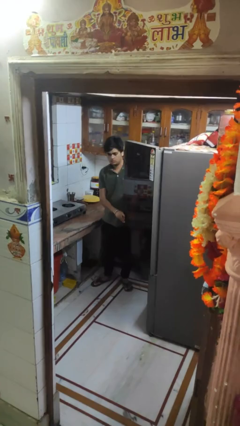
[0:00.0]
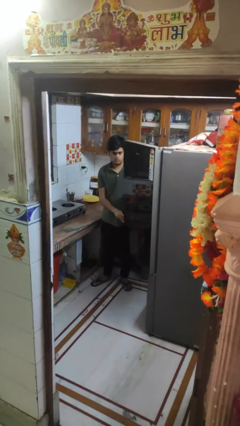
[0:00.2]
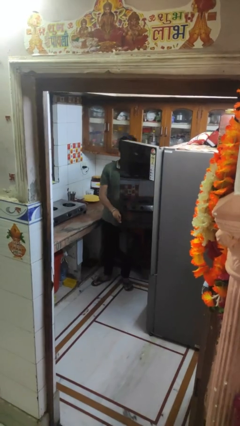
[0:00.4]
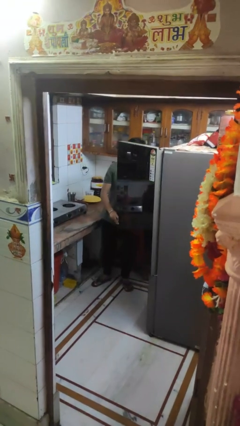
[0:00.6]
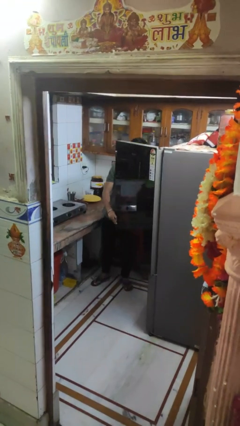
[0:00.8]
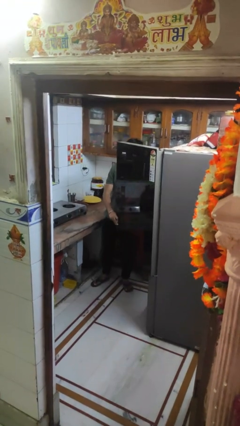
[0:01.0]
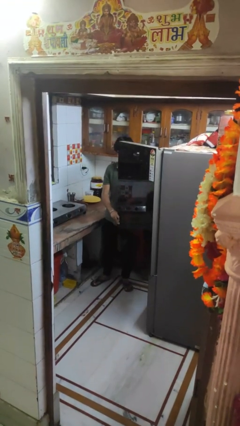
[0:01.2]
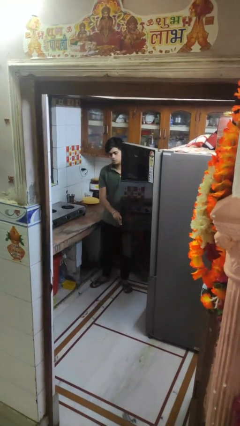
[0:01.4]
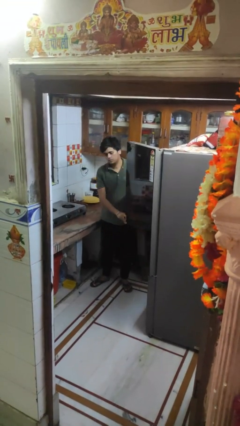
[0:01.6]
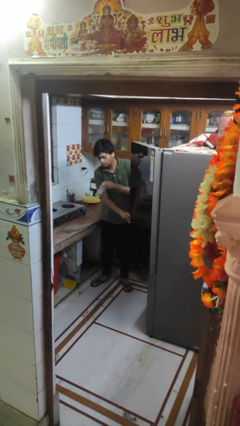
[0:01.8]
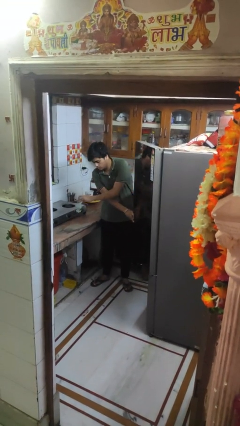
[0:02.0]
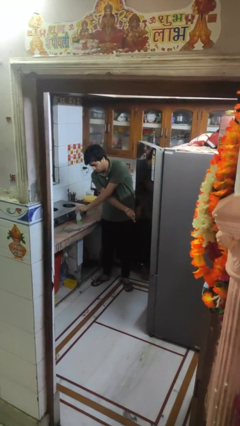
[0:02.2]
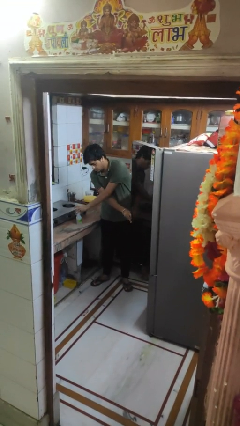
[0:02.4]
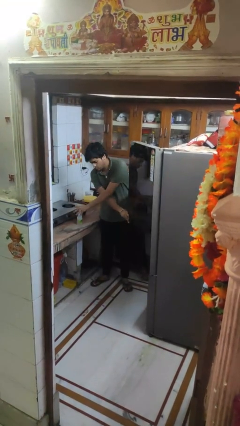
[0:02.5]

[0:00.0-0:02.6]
person takes object from refrigerator

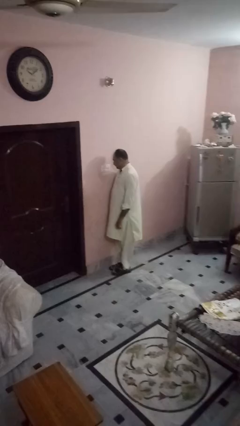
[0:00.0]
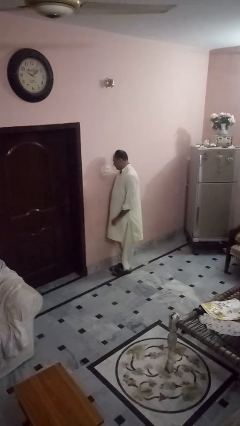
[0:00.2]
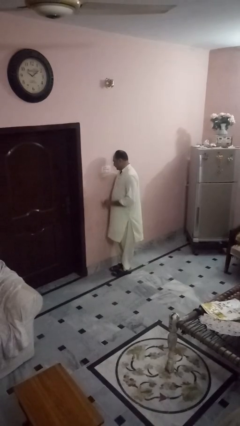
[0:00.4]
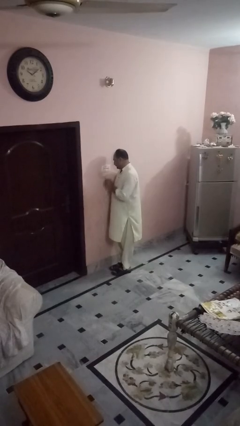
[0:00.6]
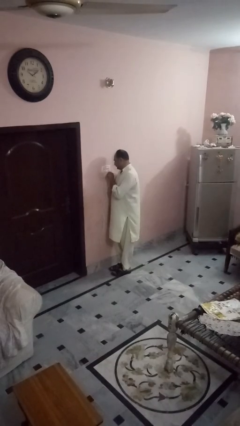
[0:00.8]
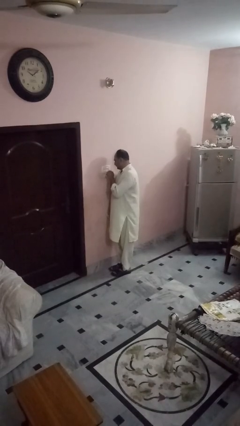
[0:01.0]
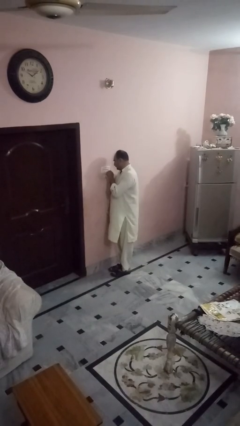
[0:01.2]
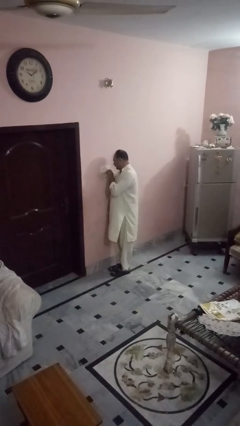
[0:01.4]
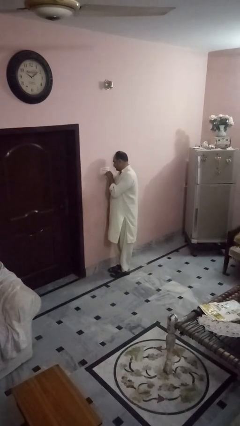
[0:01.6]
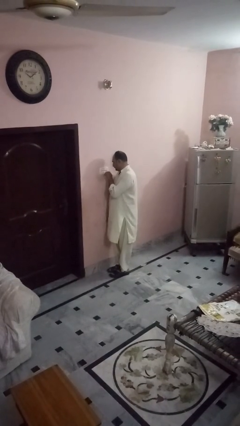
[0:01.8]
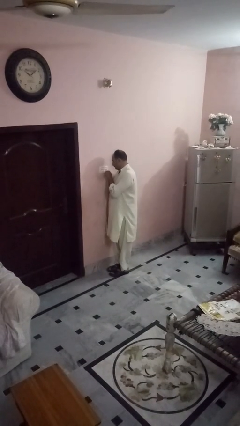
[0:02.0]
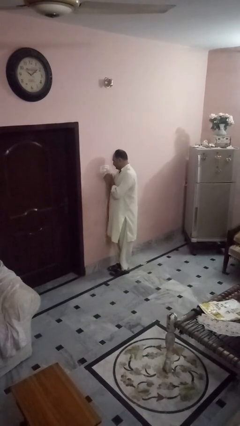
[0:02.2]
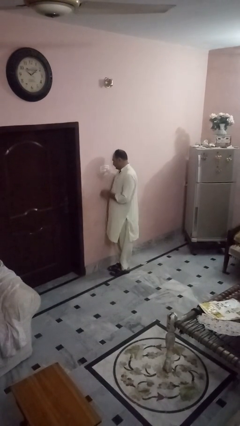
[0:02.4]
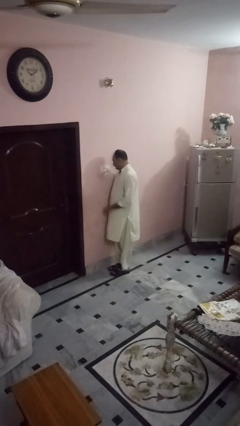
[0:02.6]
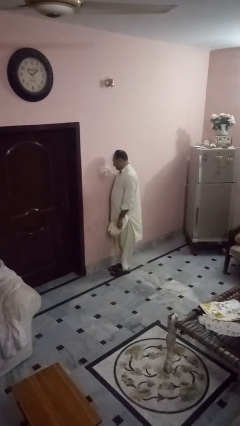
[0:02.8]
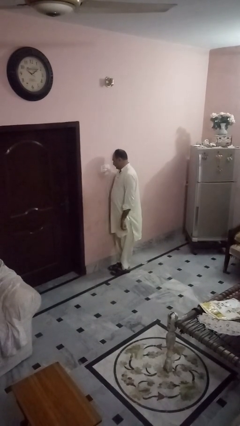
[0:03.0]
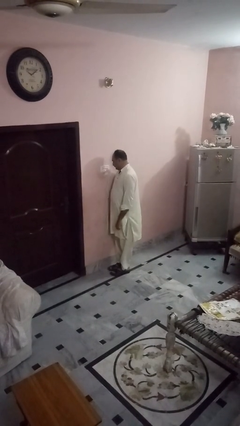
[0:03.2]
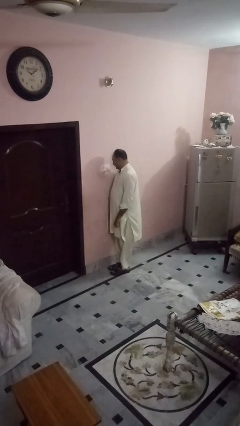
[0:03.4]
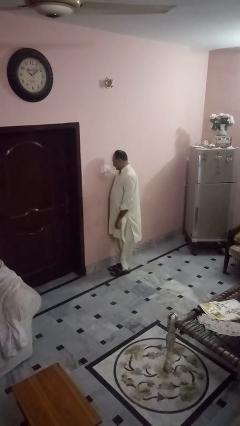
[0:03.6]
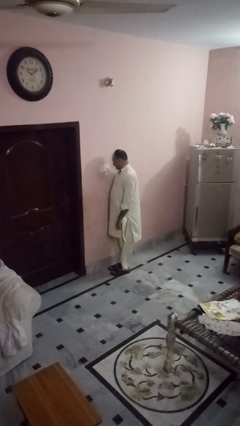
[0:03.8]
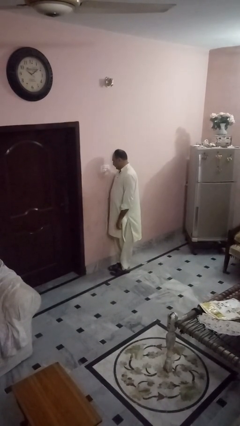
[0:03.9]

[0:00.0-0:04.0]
person plugs into electrical socket

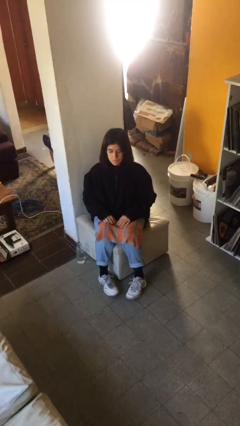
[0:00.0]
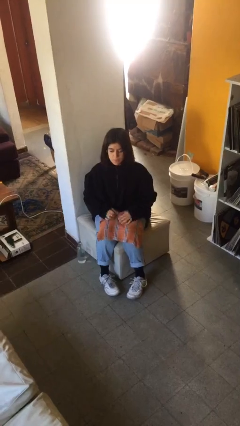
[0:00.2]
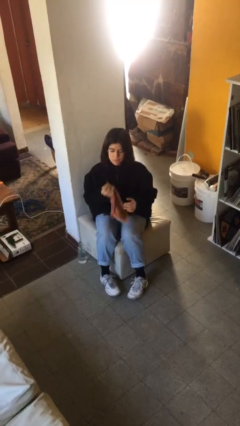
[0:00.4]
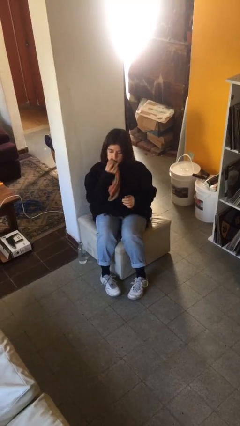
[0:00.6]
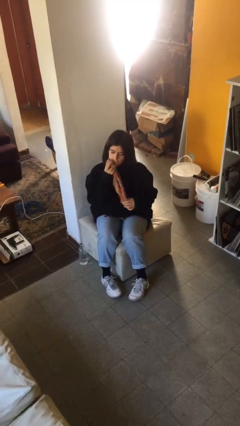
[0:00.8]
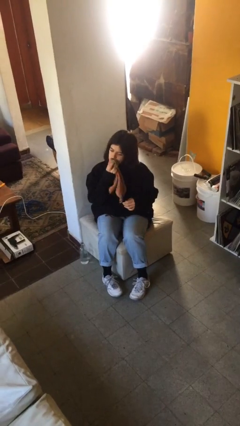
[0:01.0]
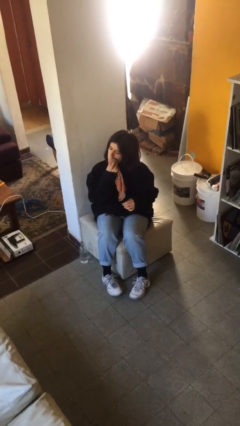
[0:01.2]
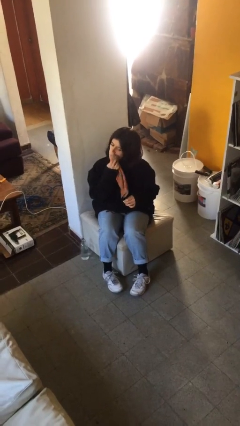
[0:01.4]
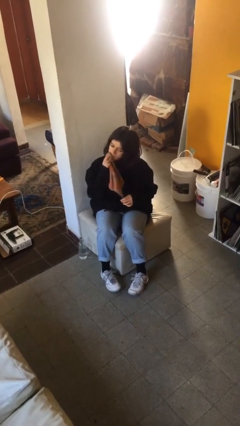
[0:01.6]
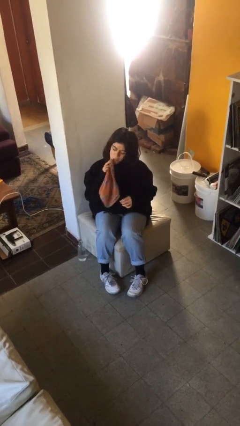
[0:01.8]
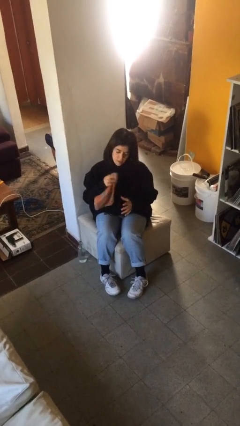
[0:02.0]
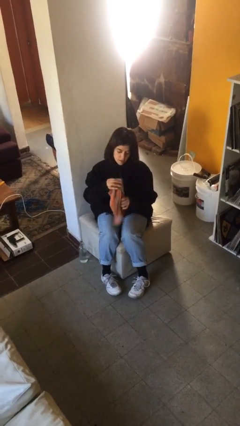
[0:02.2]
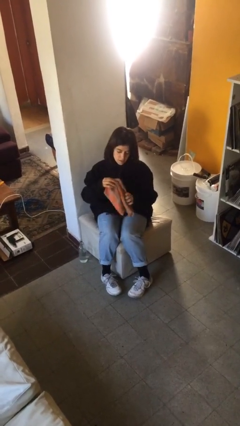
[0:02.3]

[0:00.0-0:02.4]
person wipes mouth with napkin

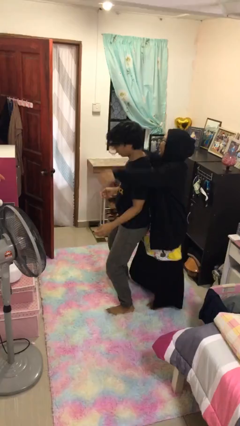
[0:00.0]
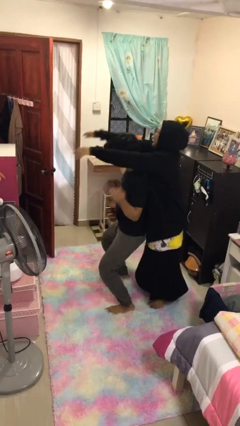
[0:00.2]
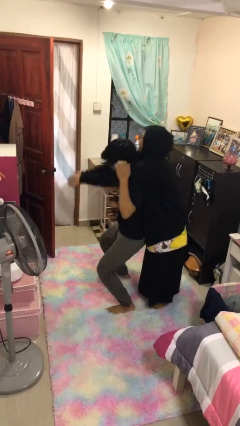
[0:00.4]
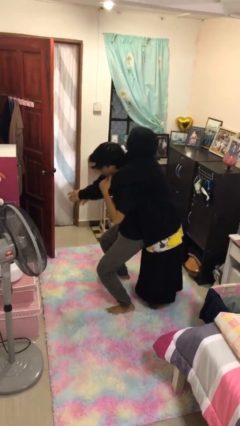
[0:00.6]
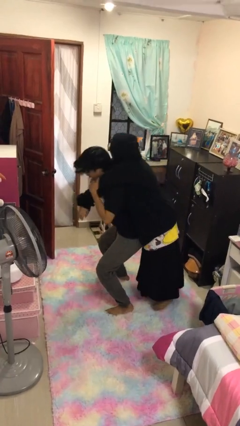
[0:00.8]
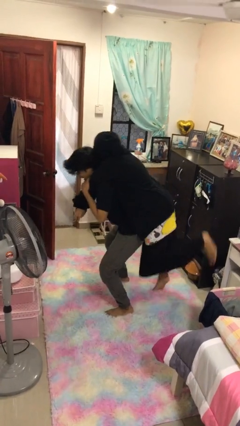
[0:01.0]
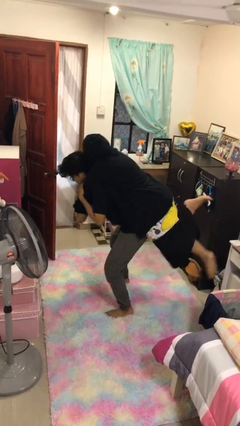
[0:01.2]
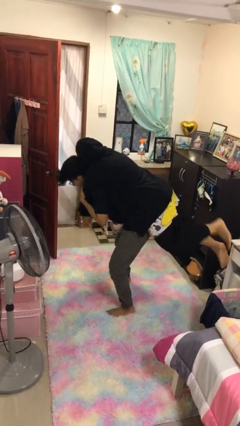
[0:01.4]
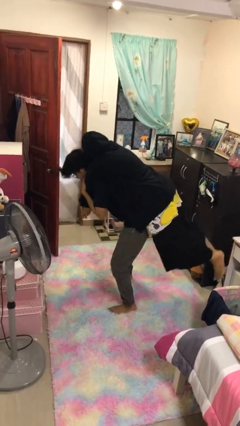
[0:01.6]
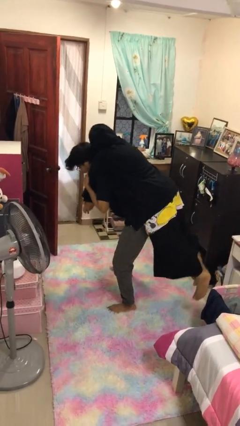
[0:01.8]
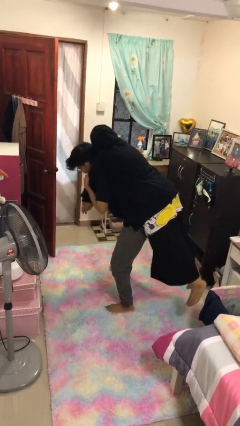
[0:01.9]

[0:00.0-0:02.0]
person picks up person

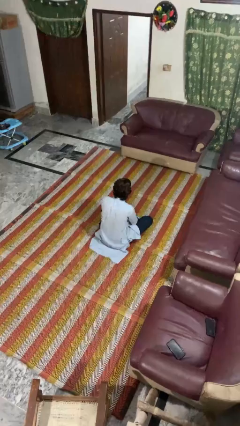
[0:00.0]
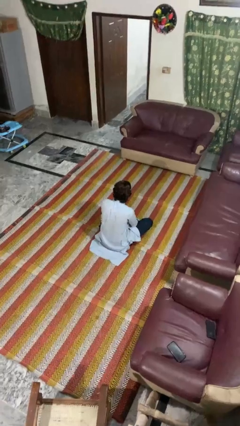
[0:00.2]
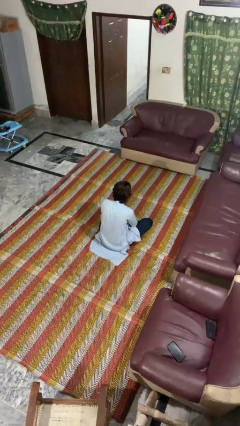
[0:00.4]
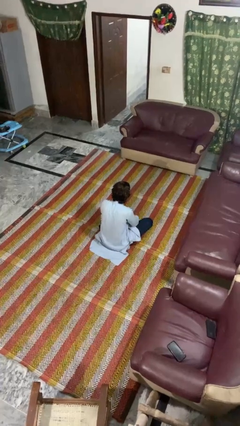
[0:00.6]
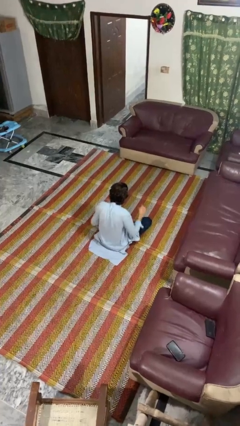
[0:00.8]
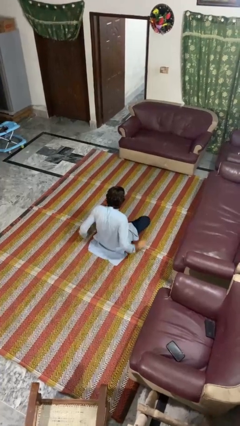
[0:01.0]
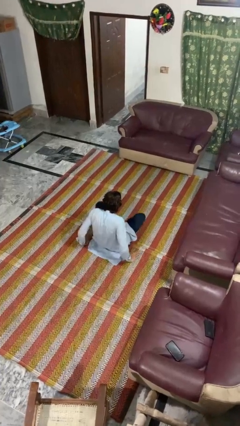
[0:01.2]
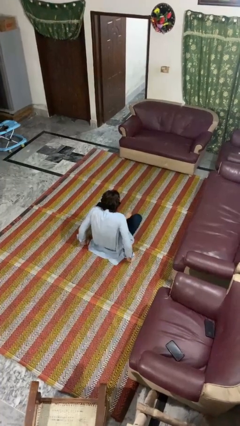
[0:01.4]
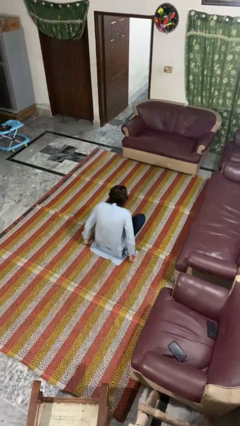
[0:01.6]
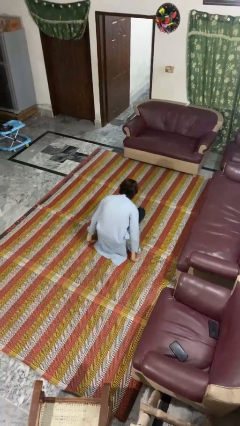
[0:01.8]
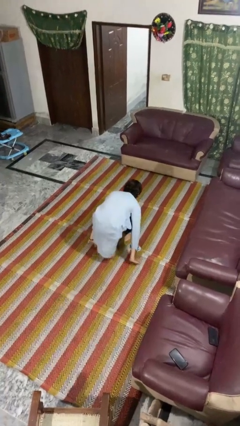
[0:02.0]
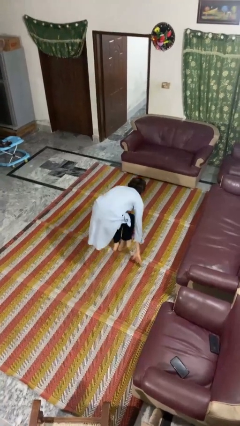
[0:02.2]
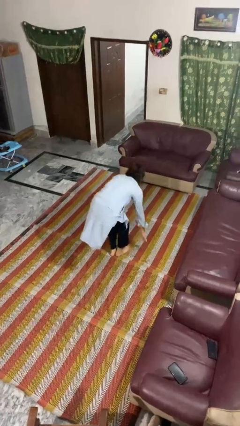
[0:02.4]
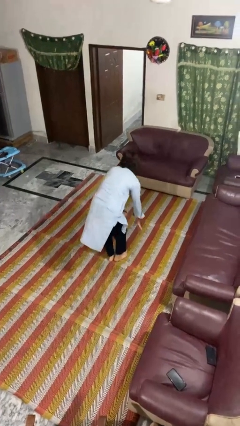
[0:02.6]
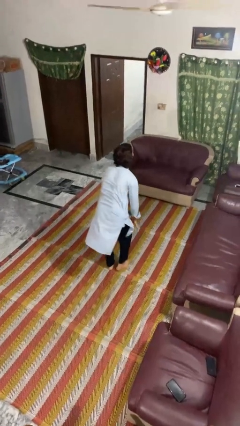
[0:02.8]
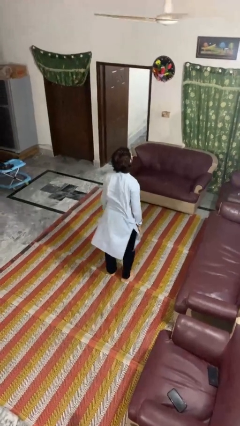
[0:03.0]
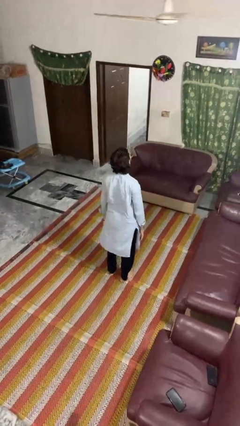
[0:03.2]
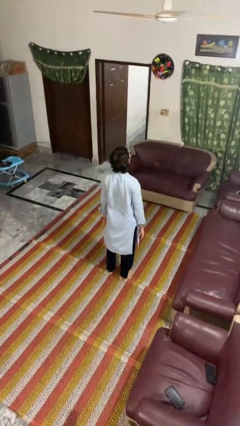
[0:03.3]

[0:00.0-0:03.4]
person stands up from floor

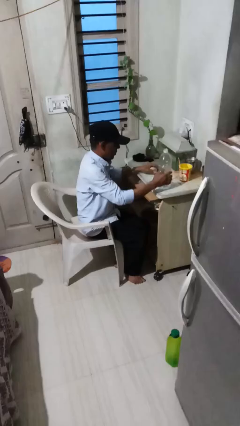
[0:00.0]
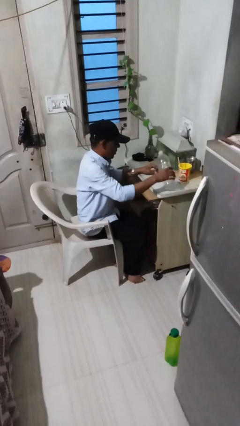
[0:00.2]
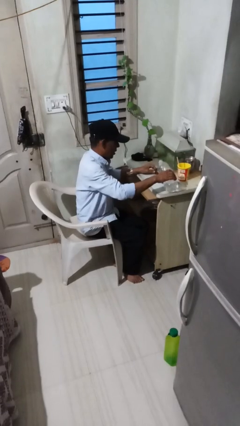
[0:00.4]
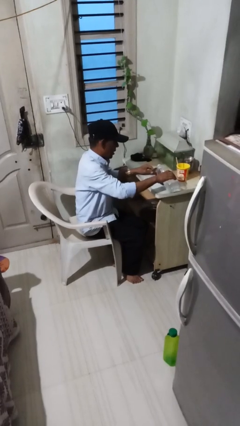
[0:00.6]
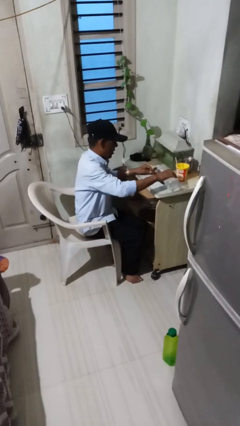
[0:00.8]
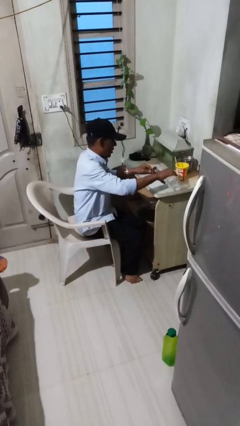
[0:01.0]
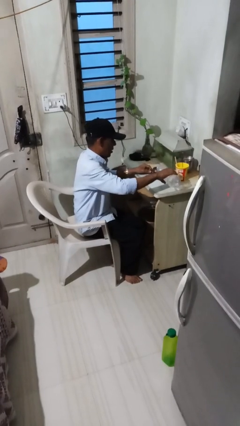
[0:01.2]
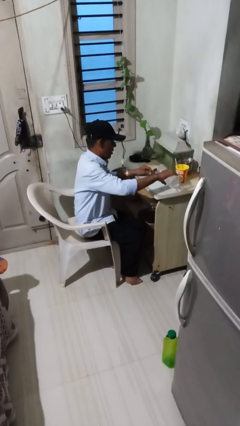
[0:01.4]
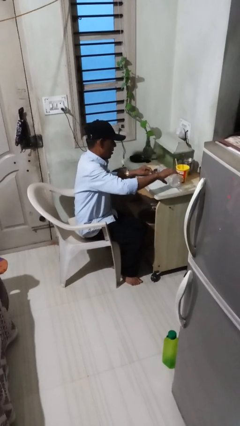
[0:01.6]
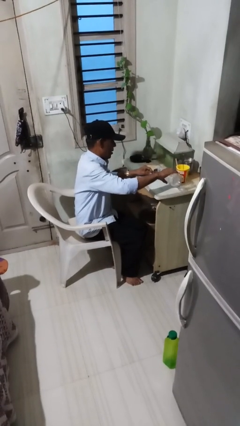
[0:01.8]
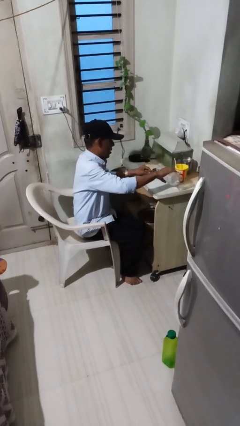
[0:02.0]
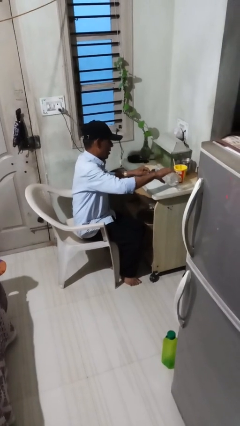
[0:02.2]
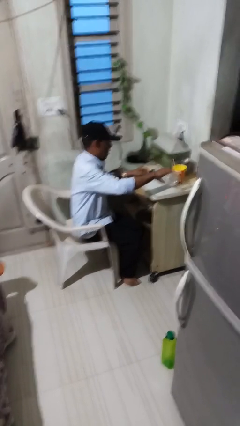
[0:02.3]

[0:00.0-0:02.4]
person pours liquid into cup

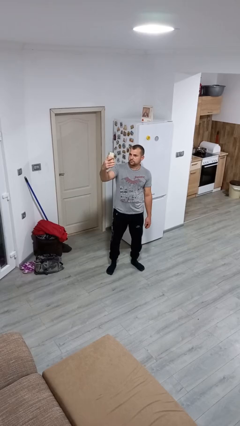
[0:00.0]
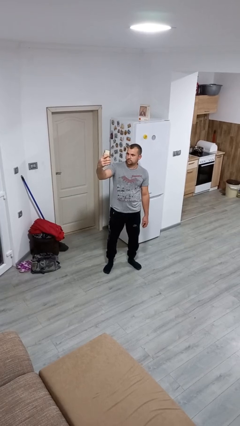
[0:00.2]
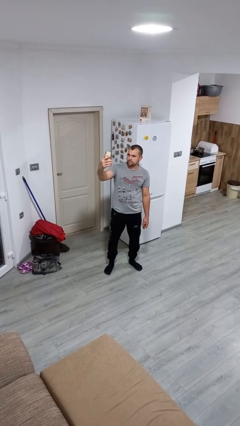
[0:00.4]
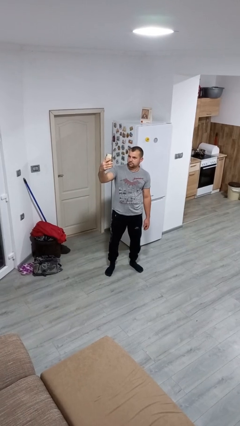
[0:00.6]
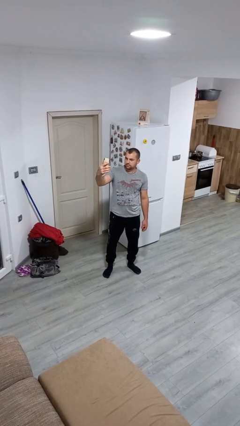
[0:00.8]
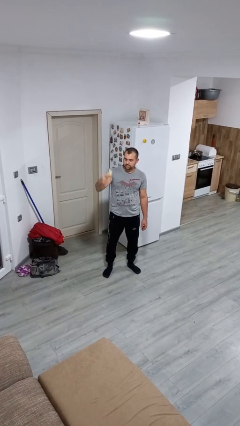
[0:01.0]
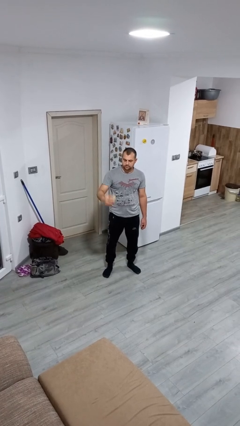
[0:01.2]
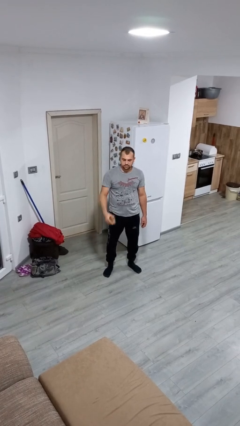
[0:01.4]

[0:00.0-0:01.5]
person takes selfie
